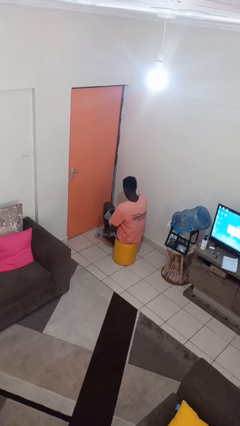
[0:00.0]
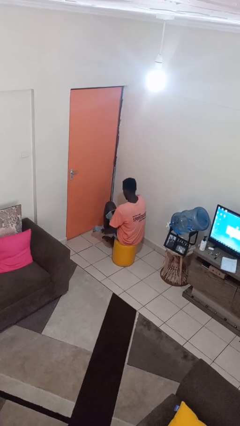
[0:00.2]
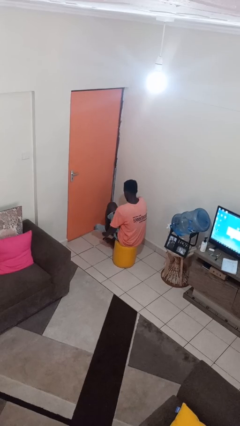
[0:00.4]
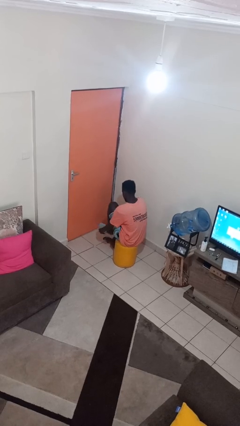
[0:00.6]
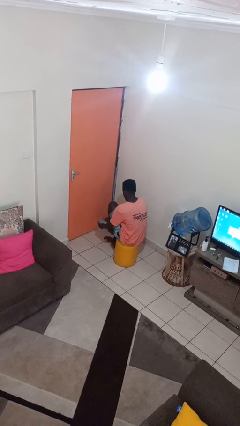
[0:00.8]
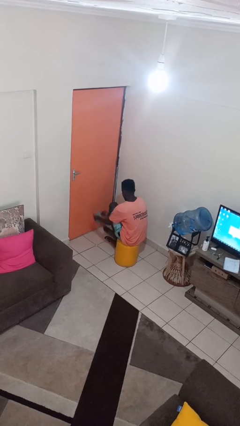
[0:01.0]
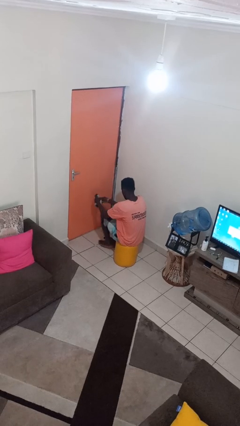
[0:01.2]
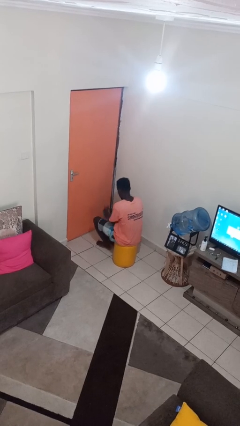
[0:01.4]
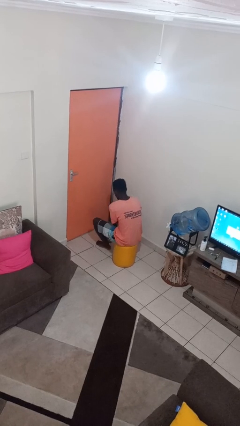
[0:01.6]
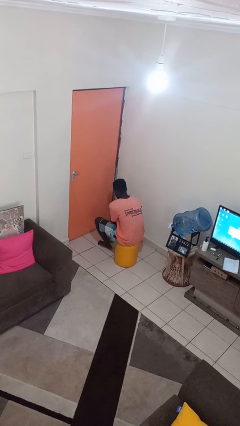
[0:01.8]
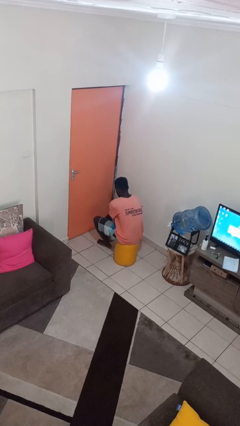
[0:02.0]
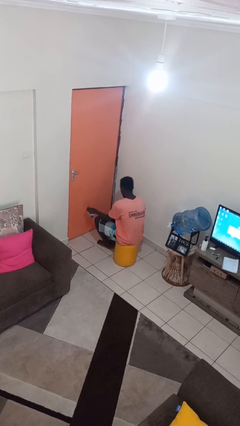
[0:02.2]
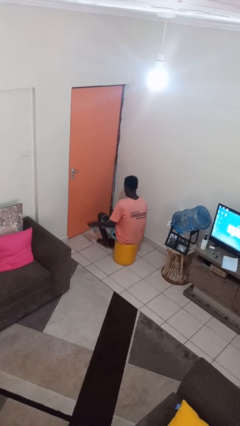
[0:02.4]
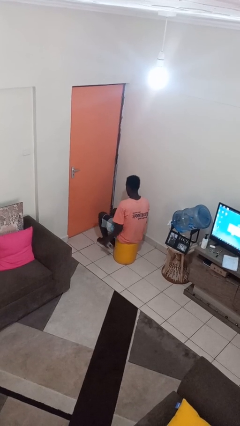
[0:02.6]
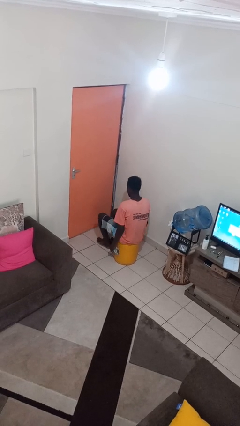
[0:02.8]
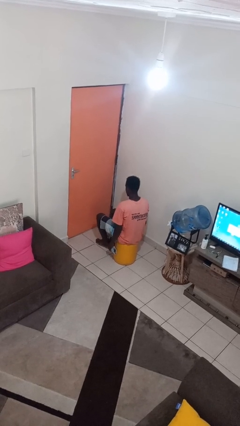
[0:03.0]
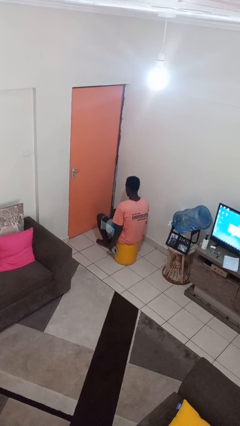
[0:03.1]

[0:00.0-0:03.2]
person takes off socks

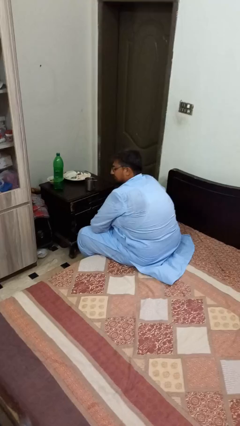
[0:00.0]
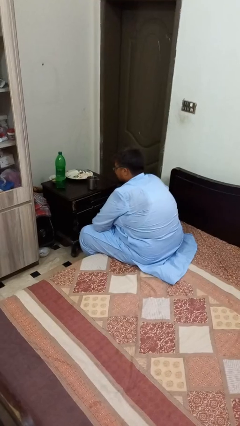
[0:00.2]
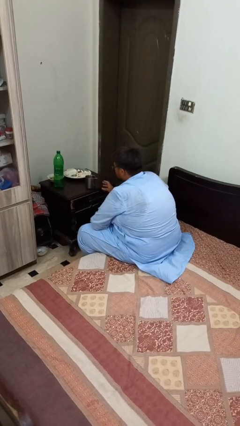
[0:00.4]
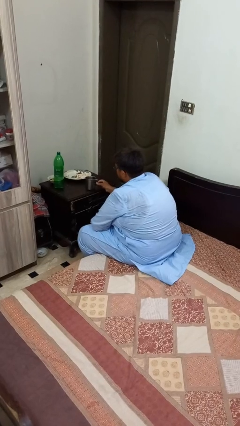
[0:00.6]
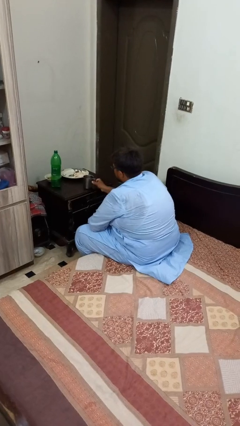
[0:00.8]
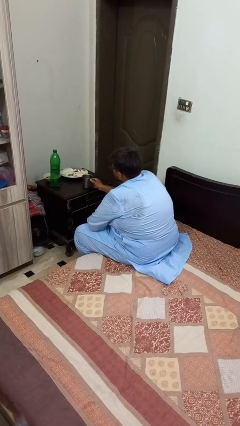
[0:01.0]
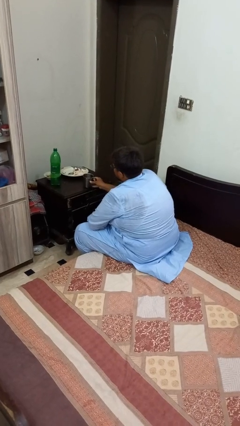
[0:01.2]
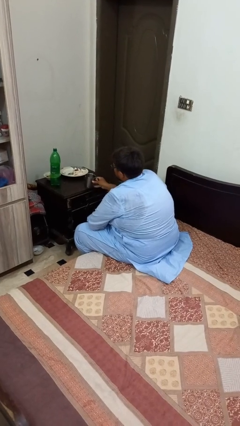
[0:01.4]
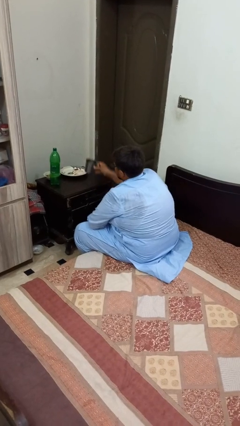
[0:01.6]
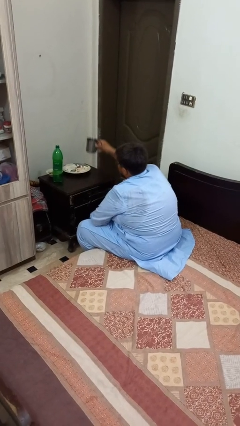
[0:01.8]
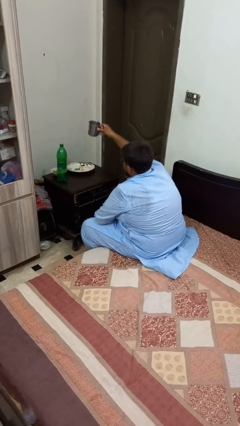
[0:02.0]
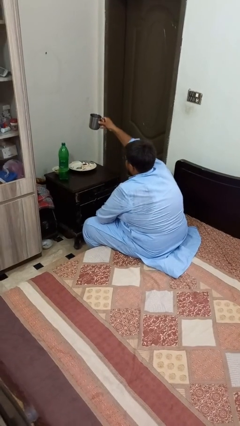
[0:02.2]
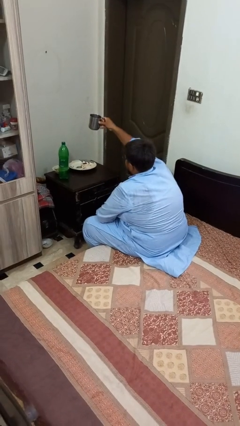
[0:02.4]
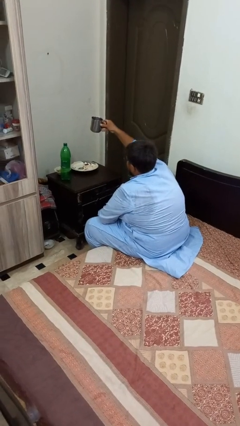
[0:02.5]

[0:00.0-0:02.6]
person picks up object from table

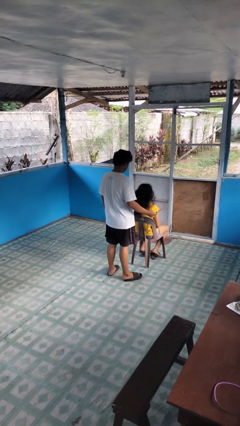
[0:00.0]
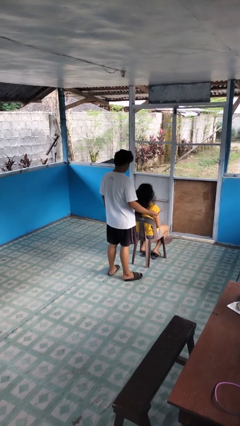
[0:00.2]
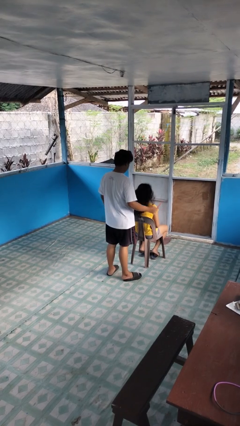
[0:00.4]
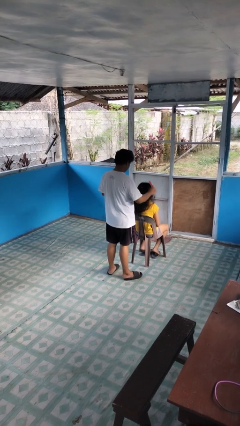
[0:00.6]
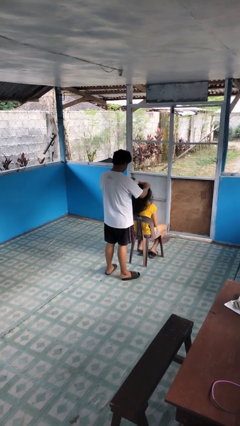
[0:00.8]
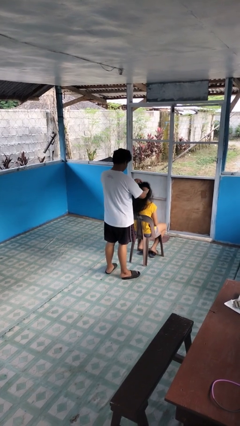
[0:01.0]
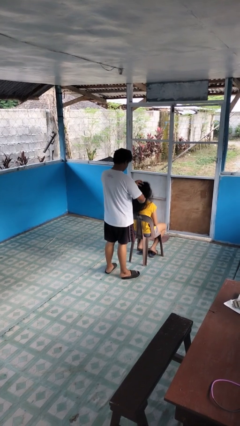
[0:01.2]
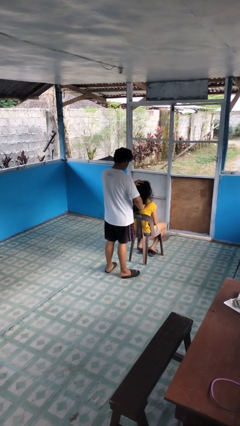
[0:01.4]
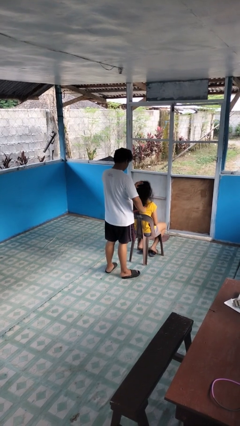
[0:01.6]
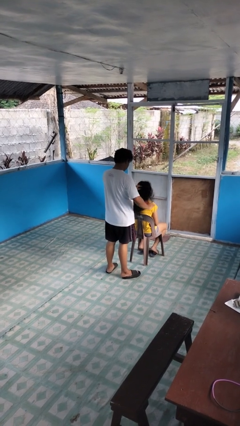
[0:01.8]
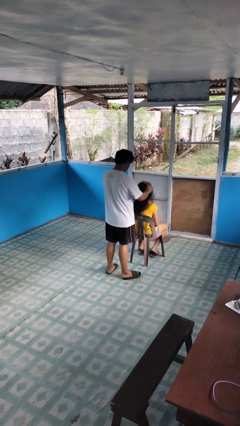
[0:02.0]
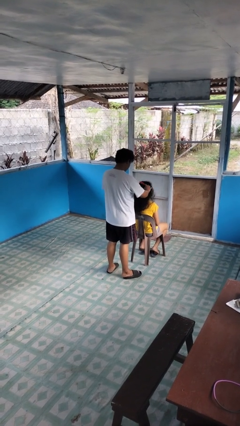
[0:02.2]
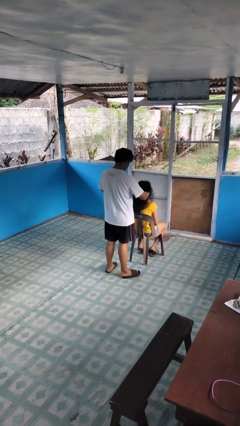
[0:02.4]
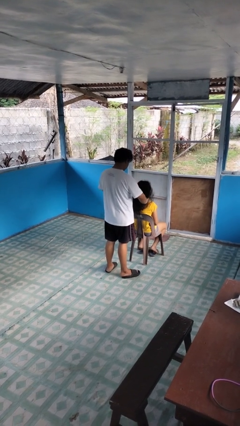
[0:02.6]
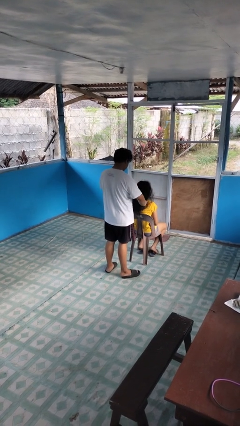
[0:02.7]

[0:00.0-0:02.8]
person brushes hair of person

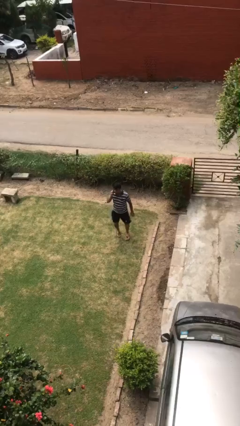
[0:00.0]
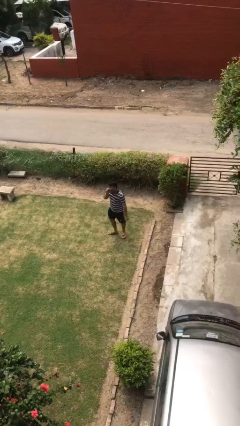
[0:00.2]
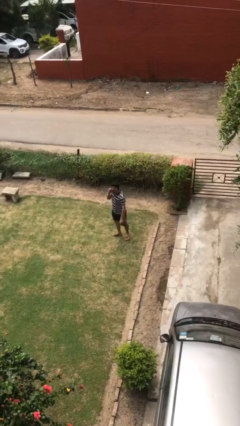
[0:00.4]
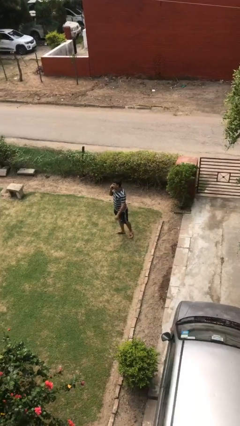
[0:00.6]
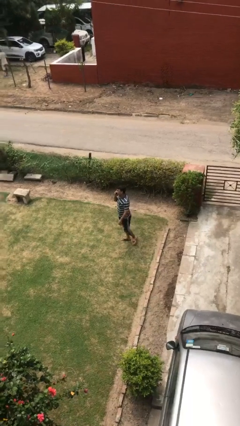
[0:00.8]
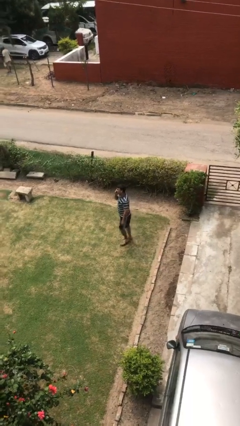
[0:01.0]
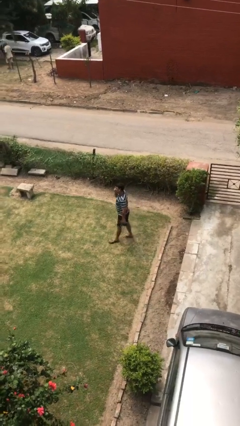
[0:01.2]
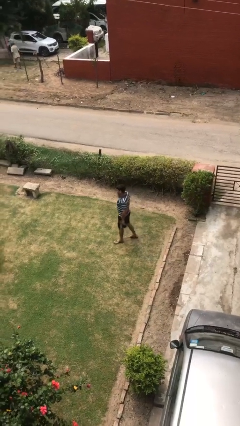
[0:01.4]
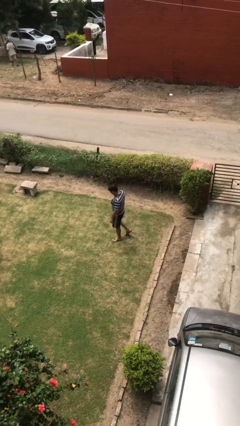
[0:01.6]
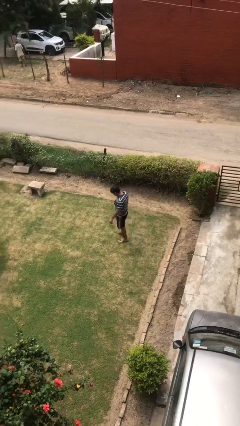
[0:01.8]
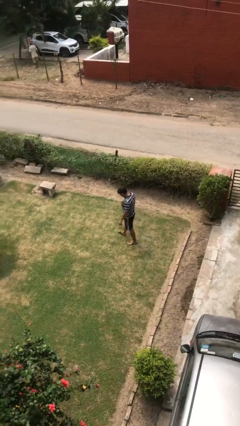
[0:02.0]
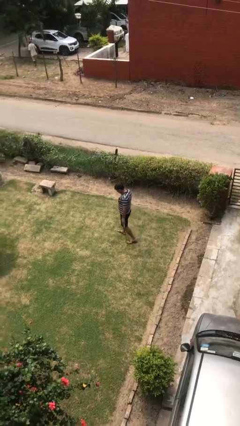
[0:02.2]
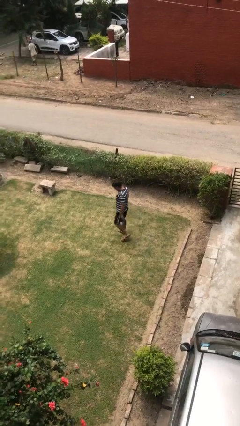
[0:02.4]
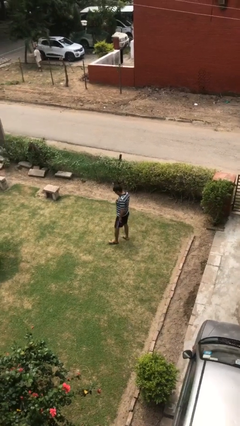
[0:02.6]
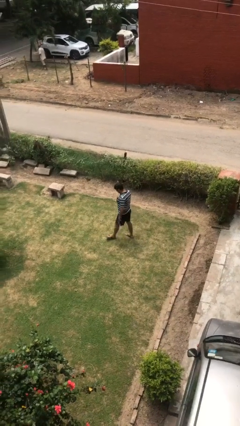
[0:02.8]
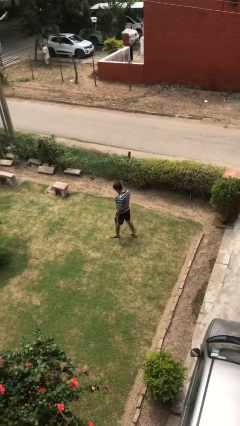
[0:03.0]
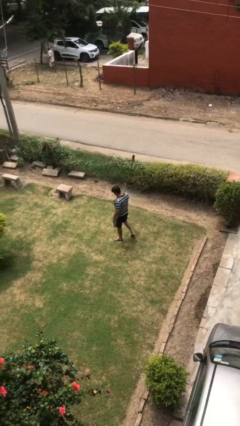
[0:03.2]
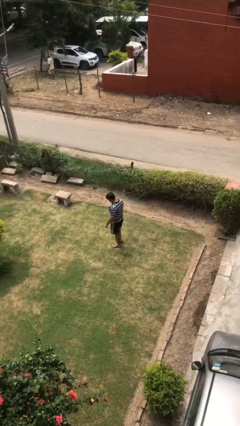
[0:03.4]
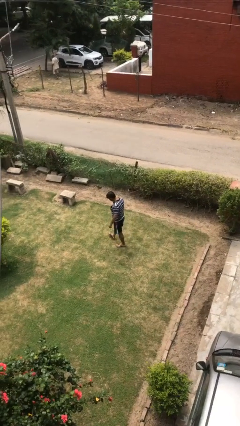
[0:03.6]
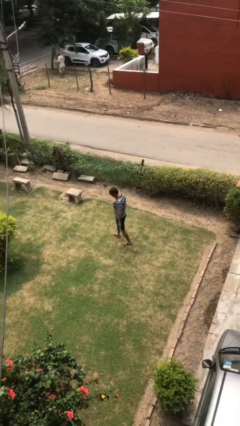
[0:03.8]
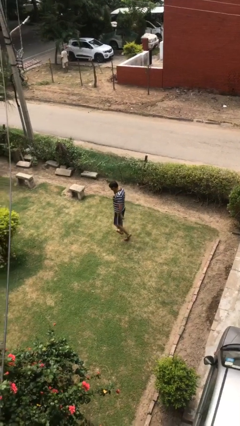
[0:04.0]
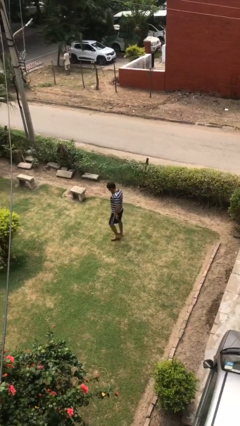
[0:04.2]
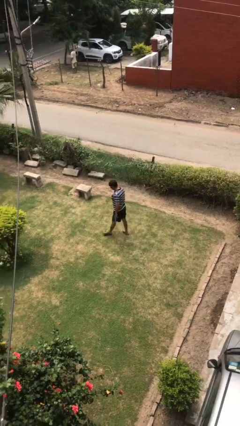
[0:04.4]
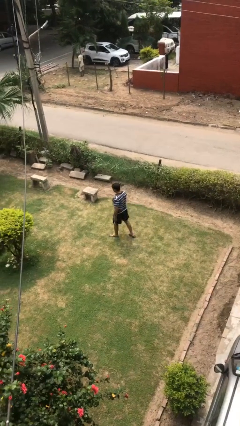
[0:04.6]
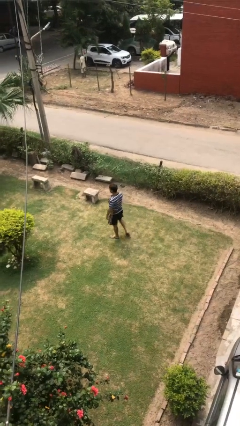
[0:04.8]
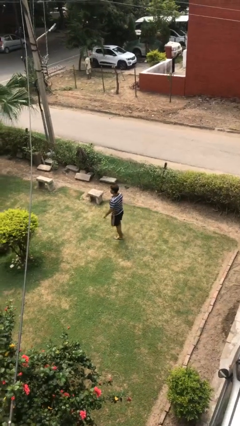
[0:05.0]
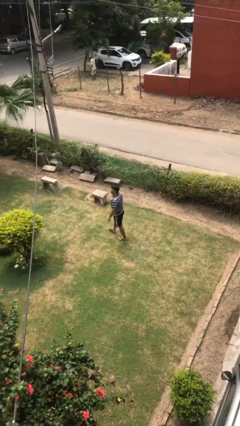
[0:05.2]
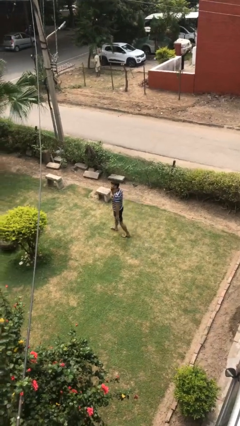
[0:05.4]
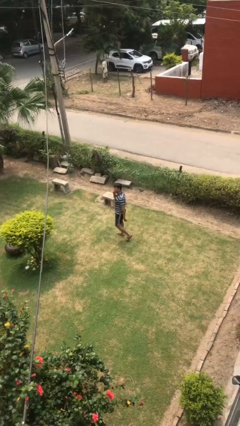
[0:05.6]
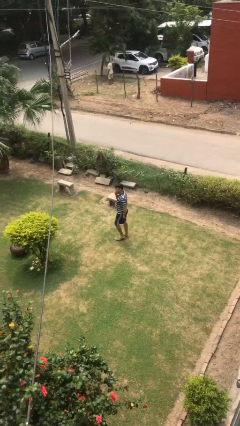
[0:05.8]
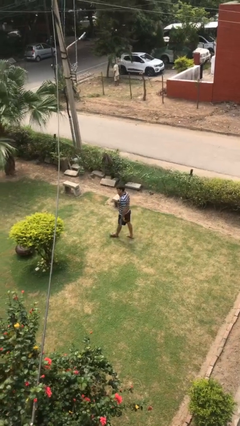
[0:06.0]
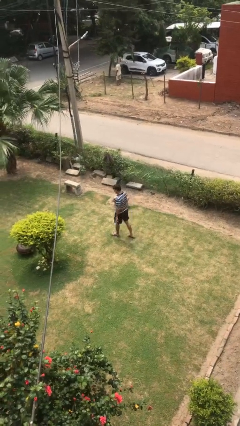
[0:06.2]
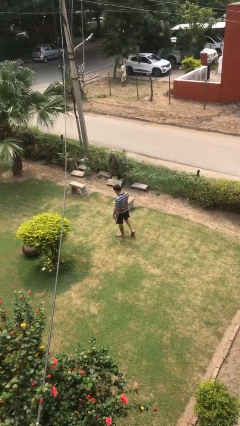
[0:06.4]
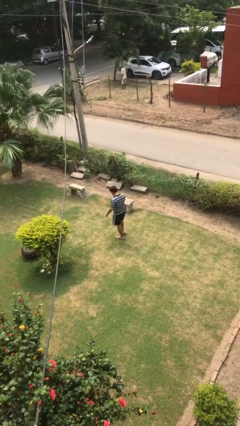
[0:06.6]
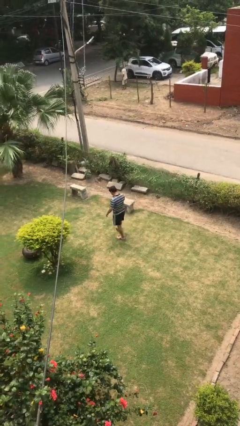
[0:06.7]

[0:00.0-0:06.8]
person talks on phone

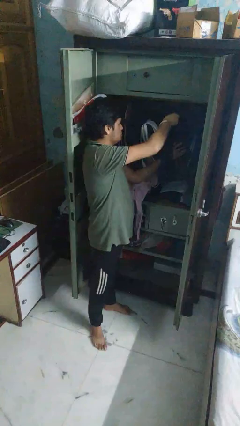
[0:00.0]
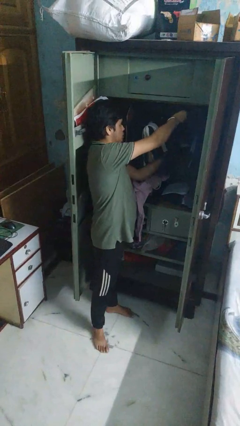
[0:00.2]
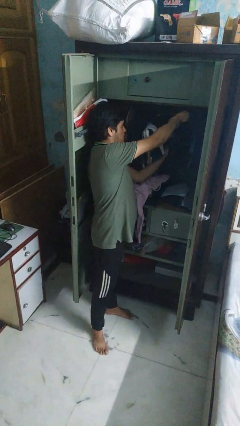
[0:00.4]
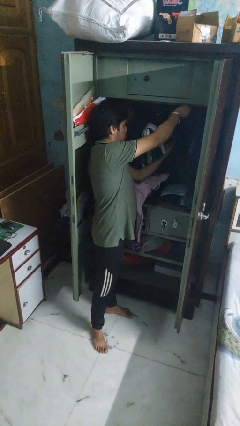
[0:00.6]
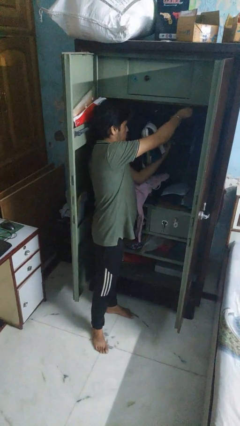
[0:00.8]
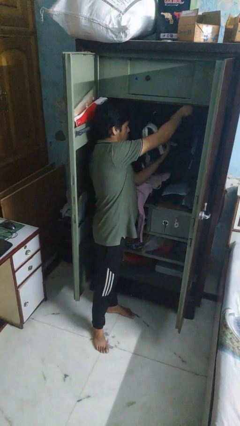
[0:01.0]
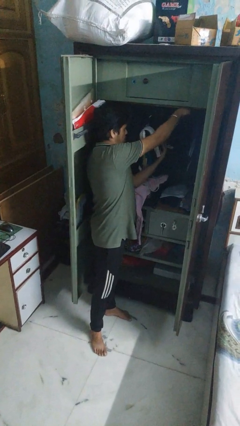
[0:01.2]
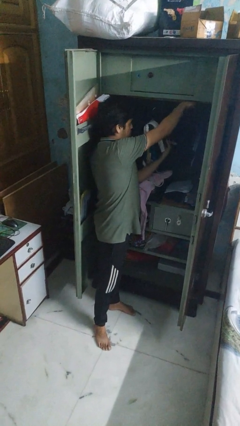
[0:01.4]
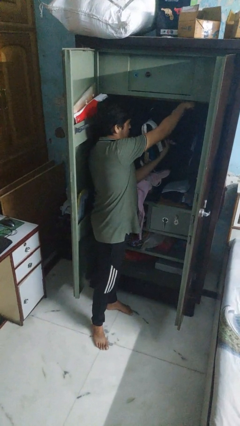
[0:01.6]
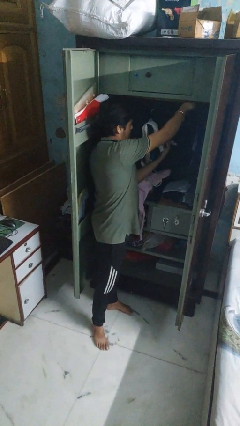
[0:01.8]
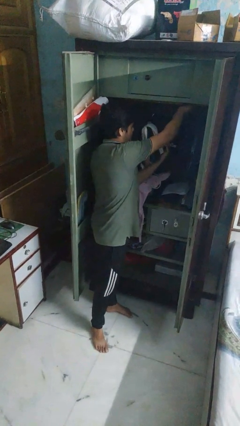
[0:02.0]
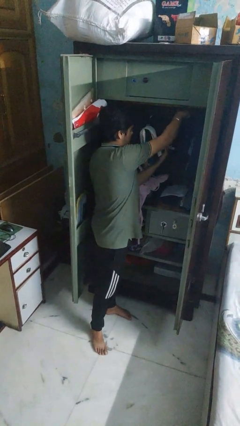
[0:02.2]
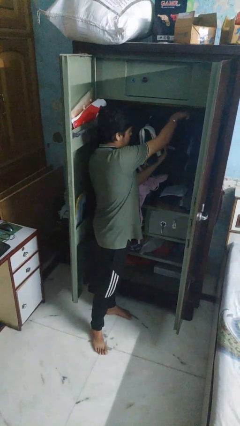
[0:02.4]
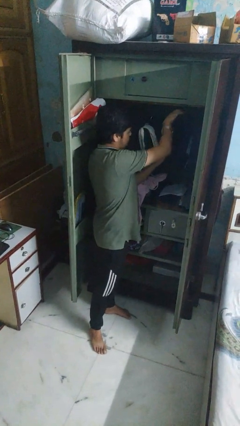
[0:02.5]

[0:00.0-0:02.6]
person puts clothes into closet
